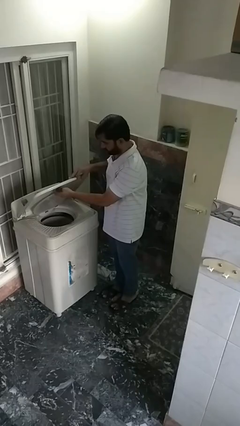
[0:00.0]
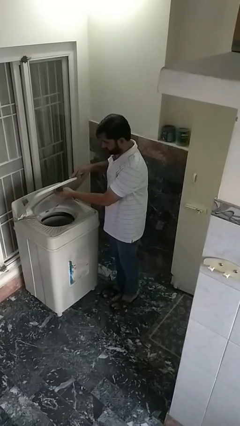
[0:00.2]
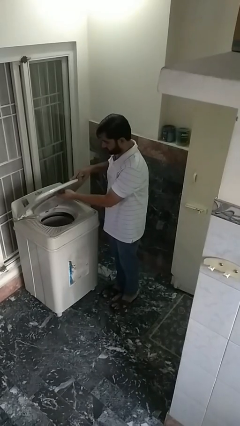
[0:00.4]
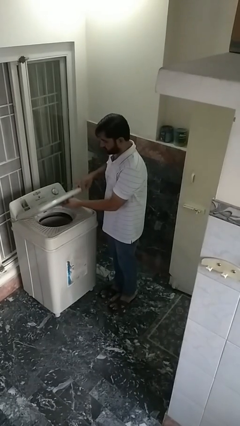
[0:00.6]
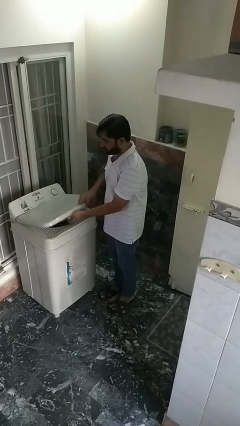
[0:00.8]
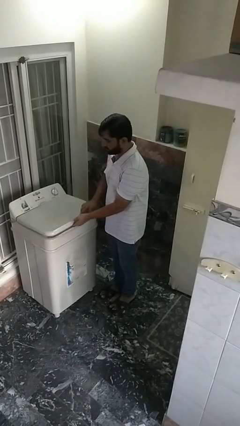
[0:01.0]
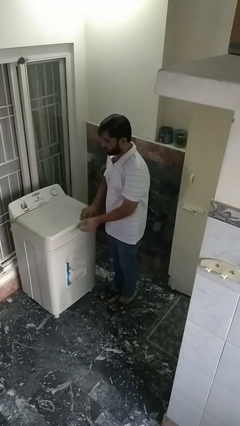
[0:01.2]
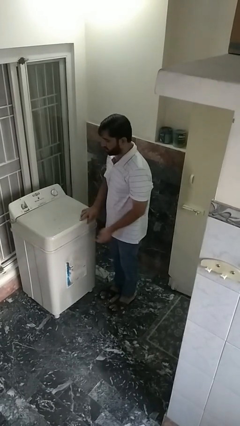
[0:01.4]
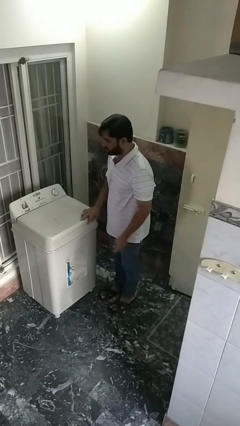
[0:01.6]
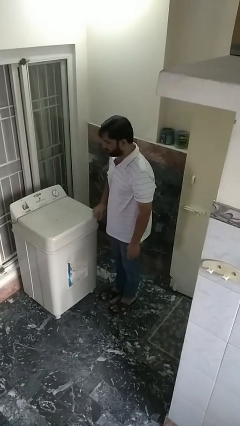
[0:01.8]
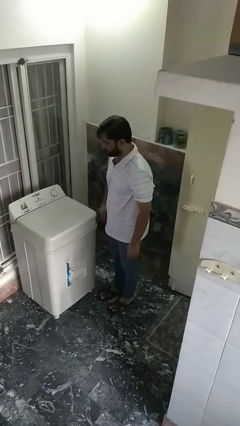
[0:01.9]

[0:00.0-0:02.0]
person closes clothes washer

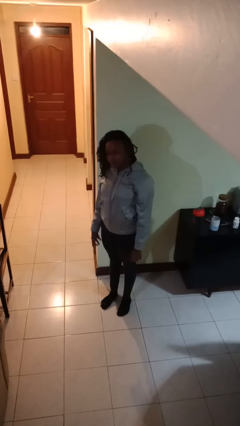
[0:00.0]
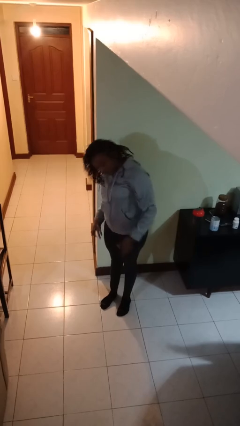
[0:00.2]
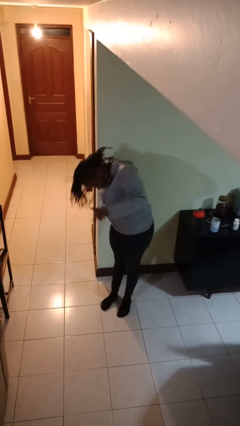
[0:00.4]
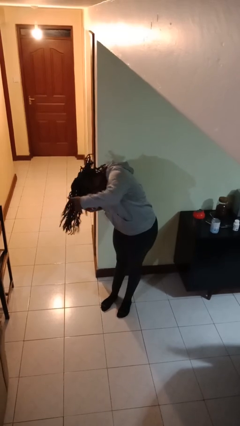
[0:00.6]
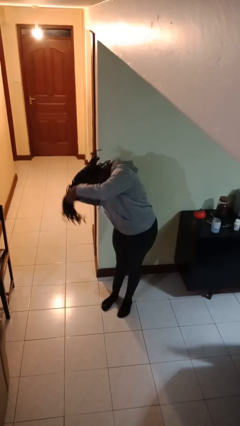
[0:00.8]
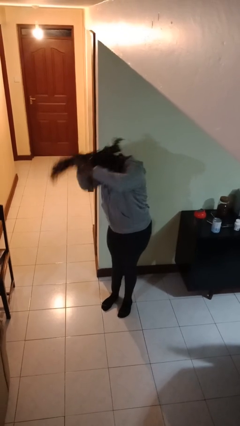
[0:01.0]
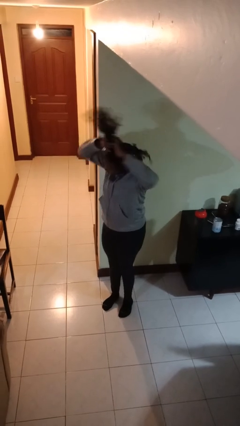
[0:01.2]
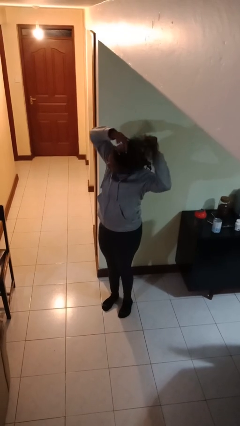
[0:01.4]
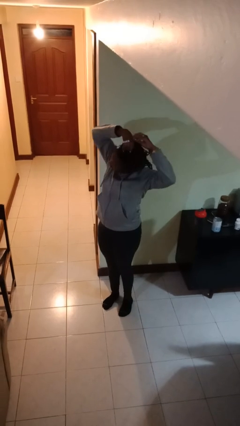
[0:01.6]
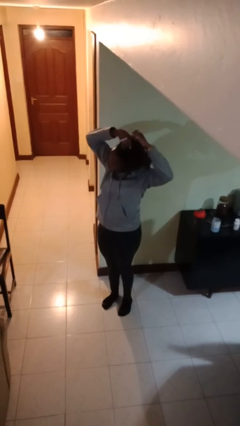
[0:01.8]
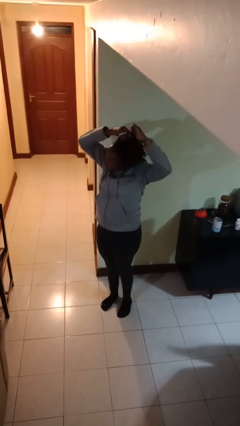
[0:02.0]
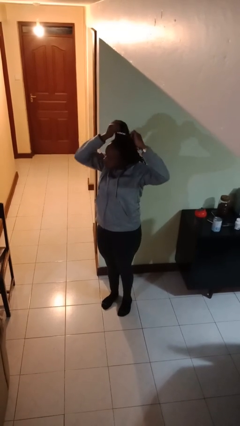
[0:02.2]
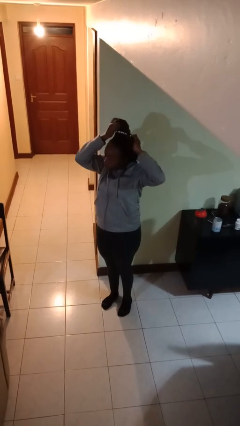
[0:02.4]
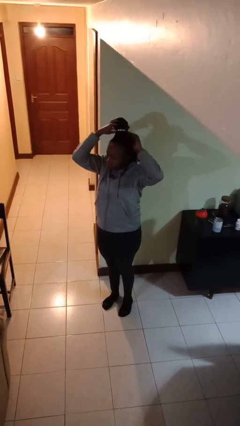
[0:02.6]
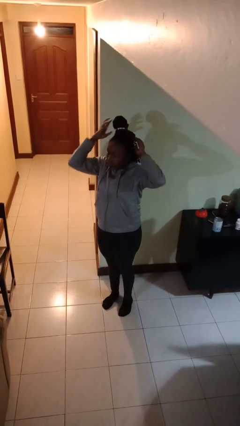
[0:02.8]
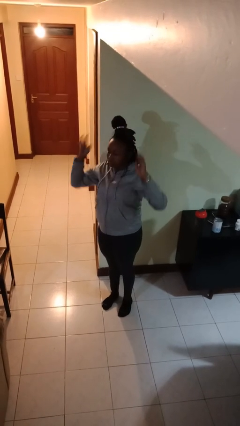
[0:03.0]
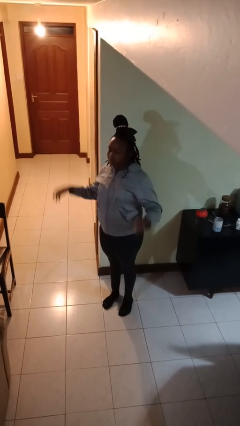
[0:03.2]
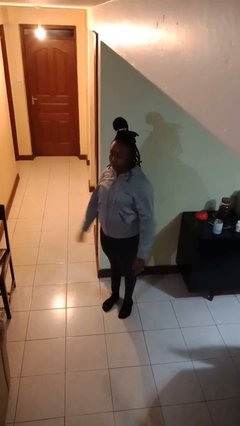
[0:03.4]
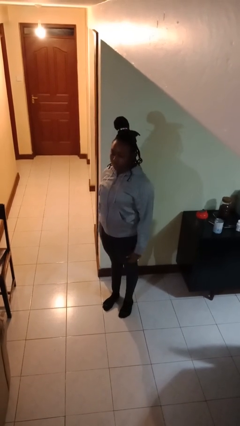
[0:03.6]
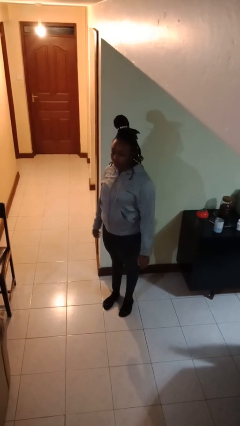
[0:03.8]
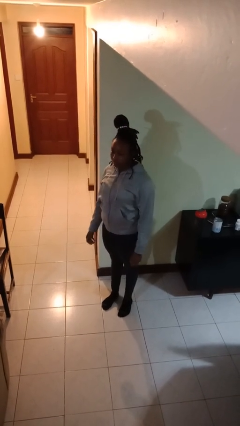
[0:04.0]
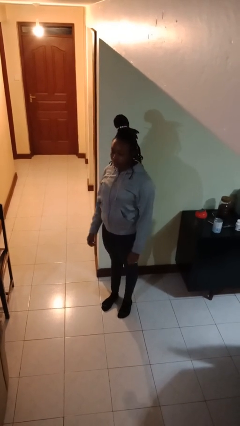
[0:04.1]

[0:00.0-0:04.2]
person puts hair in ponytail

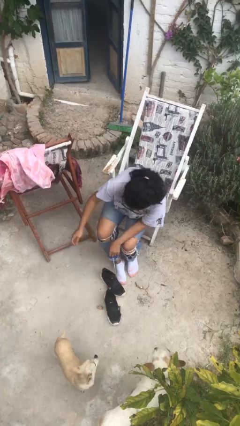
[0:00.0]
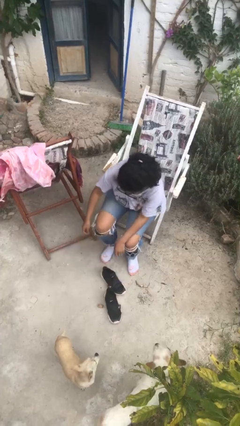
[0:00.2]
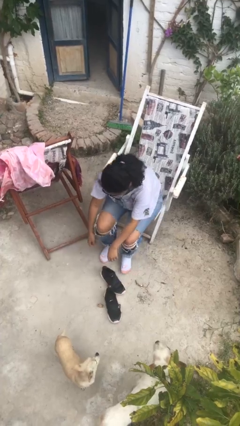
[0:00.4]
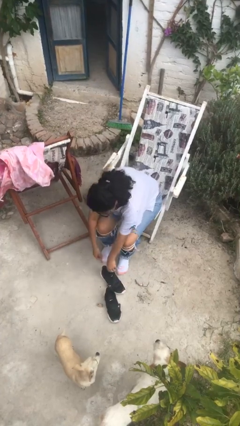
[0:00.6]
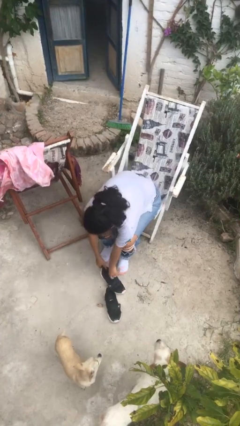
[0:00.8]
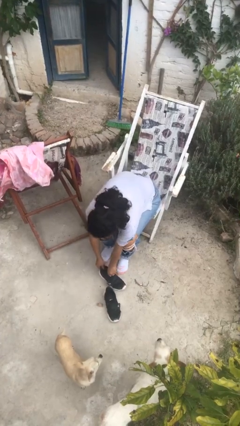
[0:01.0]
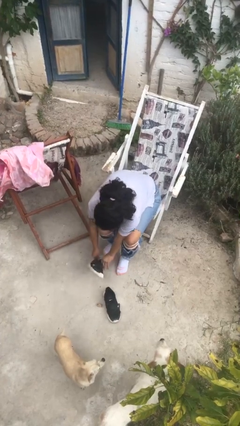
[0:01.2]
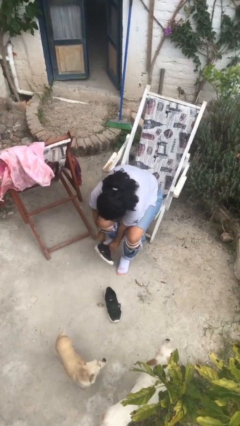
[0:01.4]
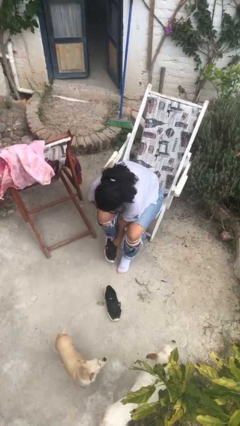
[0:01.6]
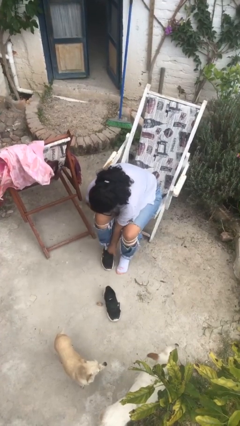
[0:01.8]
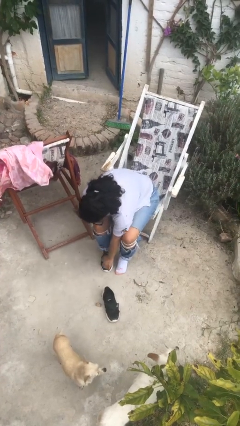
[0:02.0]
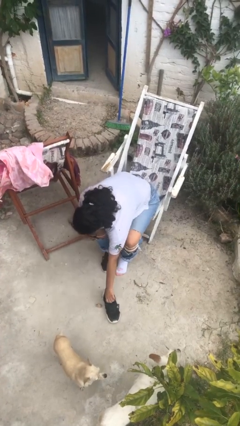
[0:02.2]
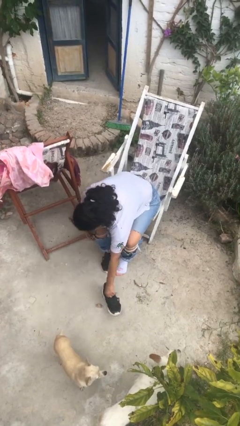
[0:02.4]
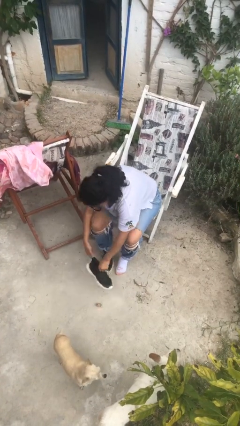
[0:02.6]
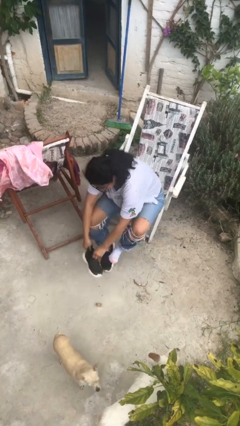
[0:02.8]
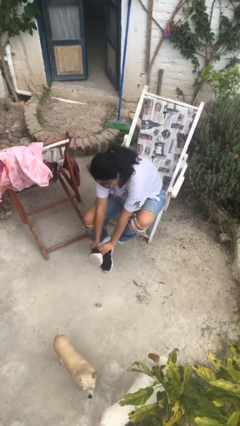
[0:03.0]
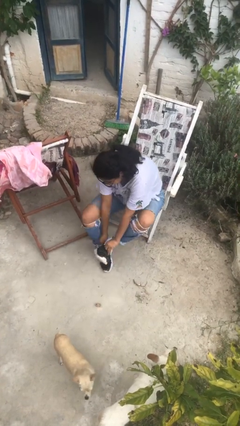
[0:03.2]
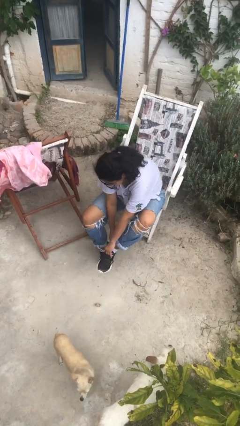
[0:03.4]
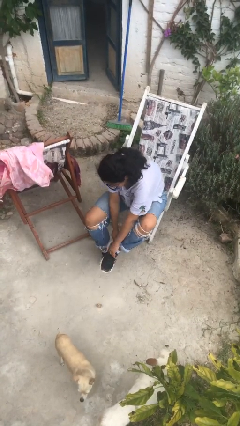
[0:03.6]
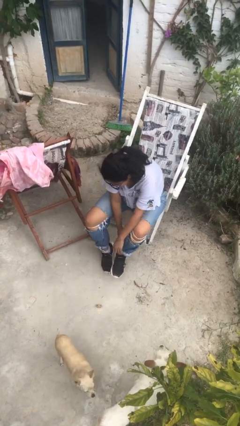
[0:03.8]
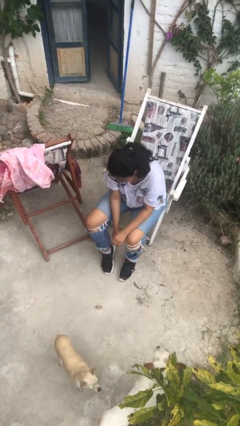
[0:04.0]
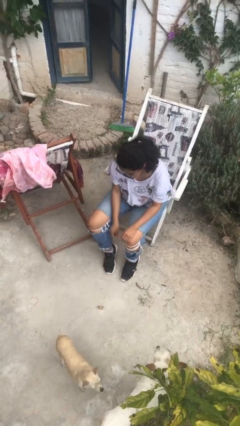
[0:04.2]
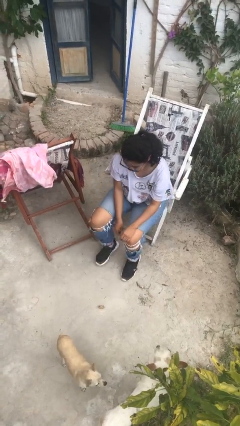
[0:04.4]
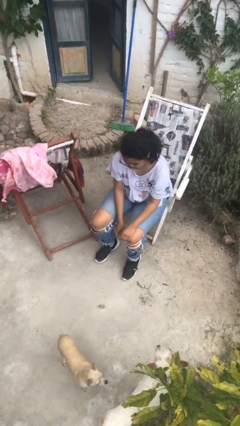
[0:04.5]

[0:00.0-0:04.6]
person puts on shoes

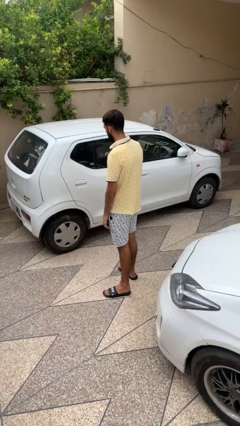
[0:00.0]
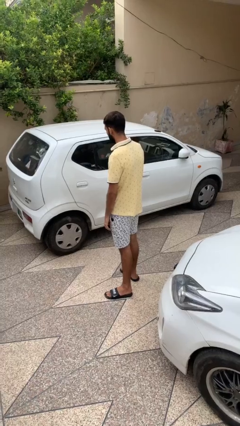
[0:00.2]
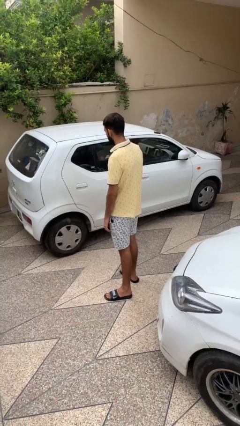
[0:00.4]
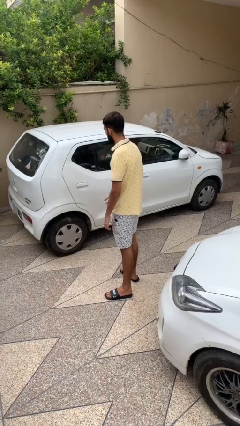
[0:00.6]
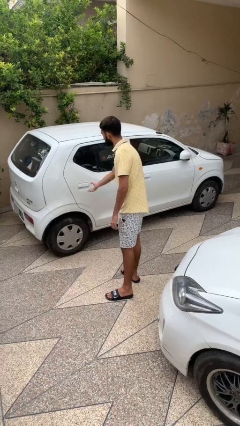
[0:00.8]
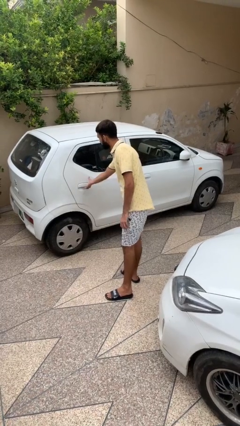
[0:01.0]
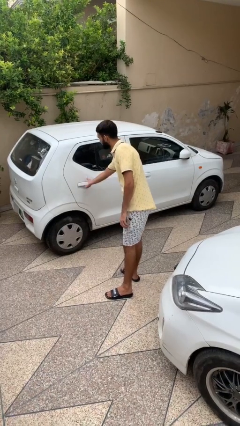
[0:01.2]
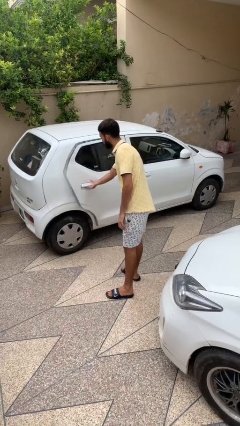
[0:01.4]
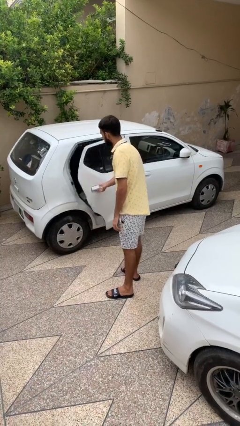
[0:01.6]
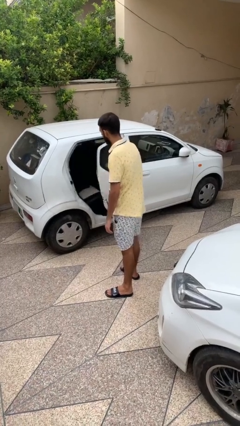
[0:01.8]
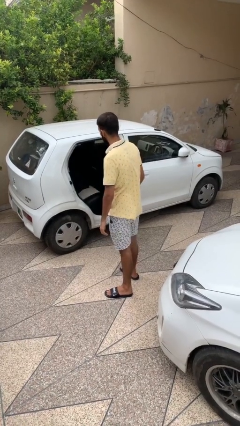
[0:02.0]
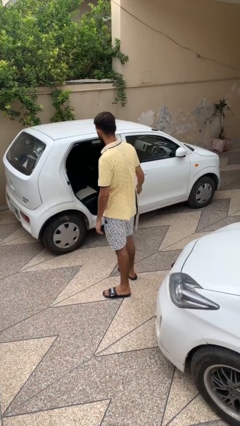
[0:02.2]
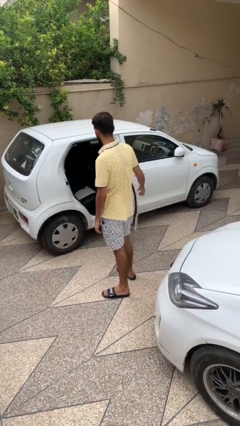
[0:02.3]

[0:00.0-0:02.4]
person opens car door

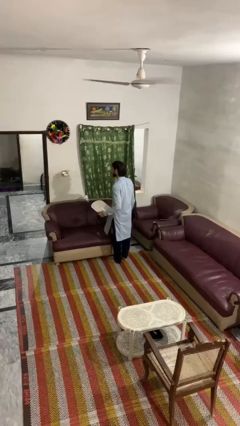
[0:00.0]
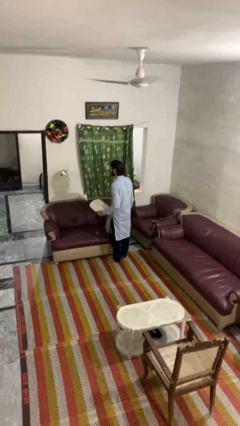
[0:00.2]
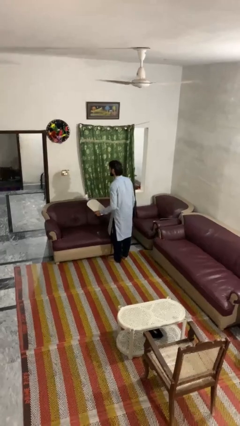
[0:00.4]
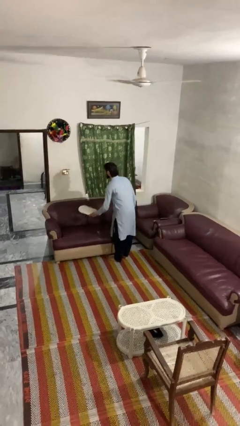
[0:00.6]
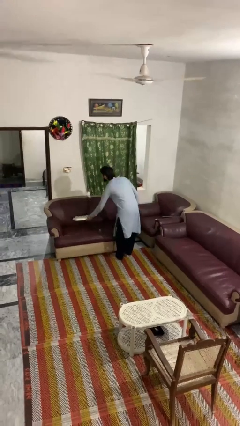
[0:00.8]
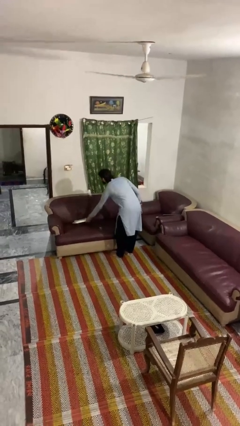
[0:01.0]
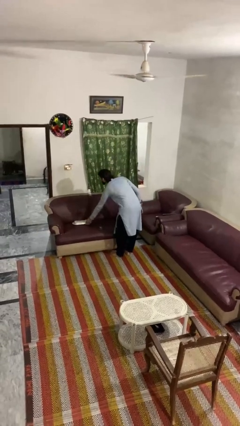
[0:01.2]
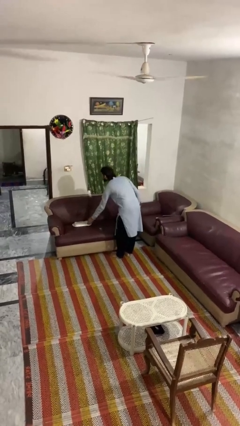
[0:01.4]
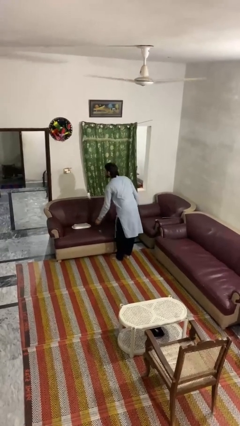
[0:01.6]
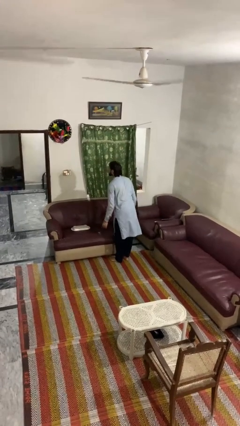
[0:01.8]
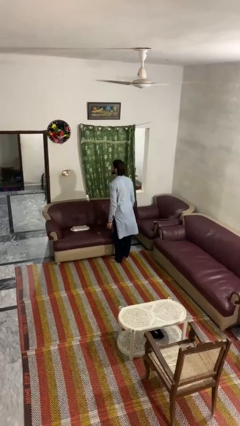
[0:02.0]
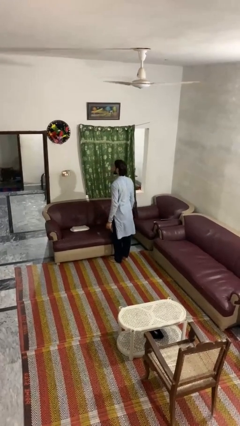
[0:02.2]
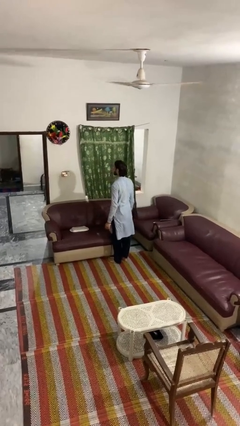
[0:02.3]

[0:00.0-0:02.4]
person puts down object on couch

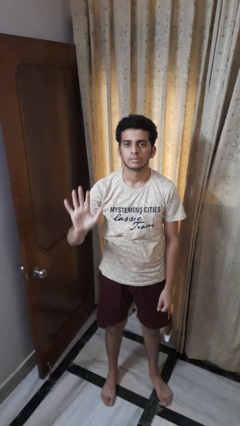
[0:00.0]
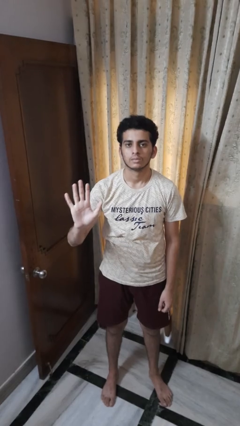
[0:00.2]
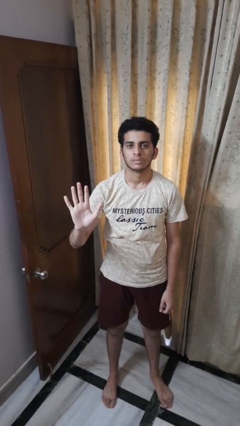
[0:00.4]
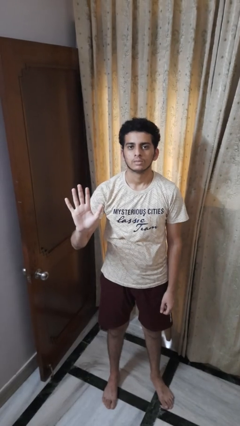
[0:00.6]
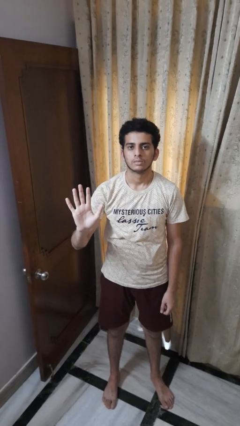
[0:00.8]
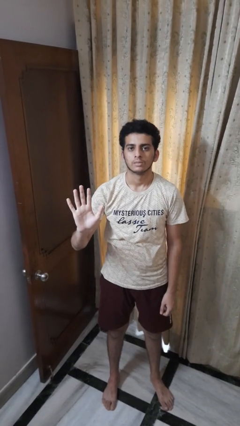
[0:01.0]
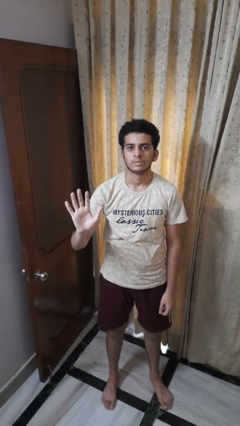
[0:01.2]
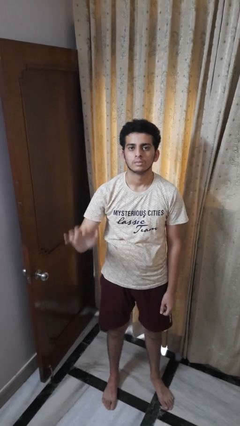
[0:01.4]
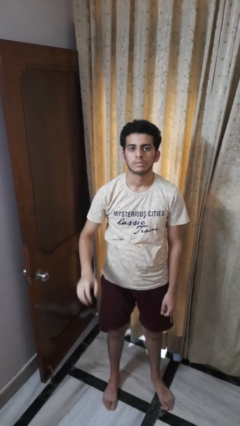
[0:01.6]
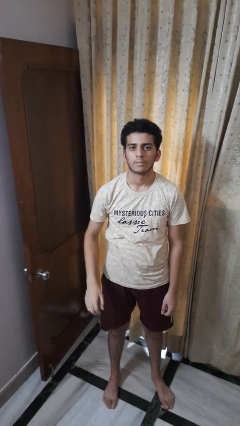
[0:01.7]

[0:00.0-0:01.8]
person gestures stop
